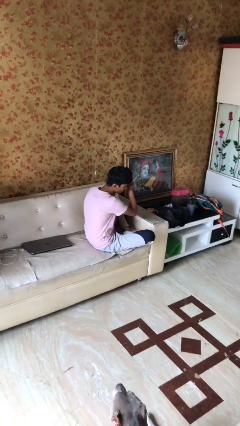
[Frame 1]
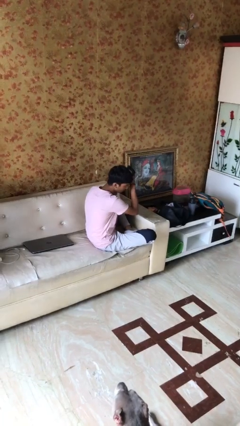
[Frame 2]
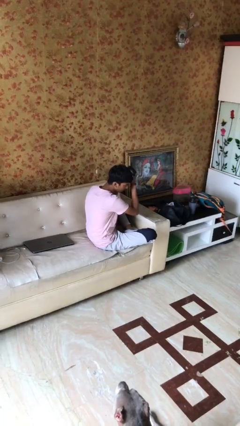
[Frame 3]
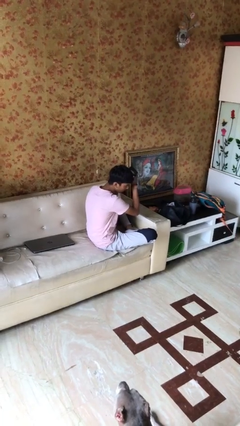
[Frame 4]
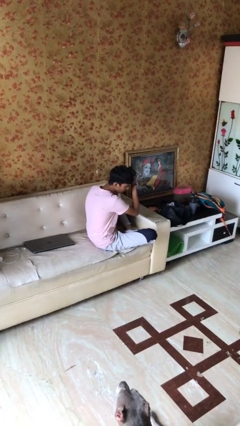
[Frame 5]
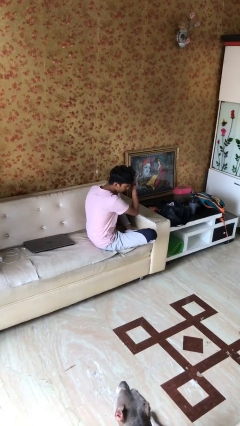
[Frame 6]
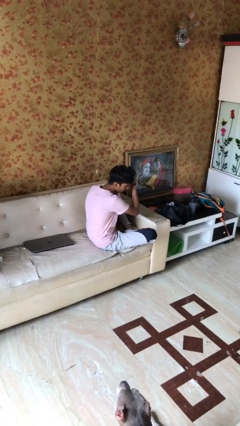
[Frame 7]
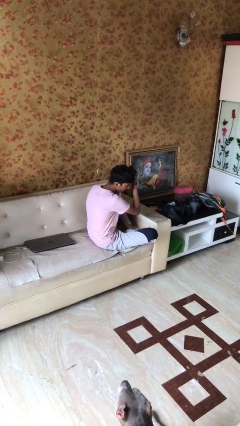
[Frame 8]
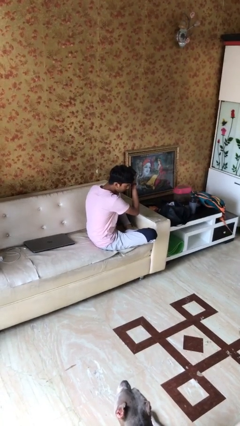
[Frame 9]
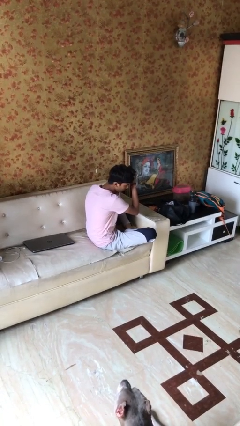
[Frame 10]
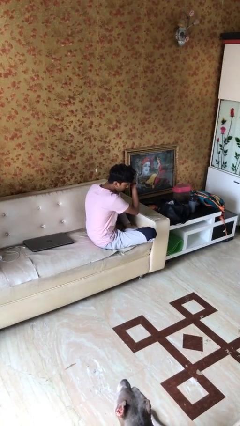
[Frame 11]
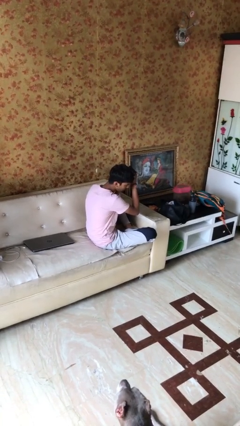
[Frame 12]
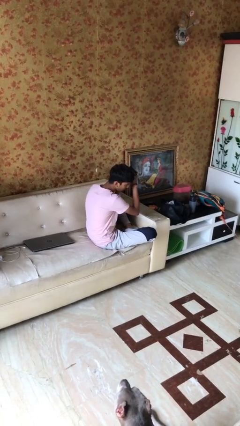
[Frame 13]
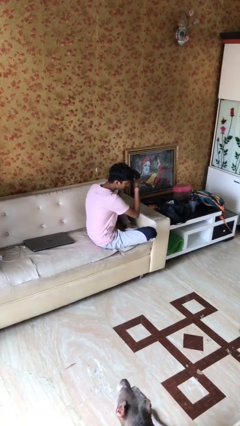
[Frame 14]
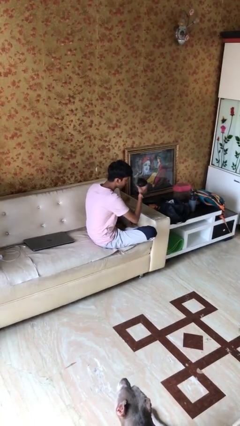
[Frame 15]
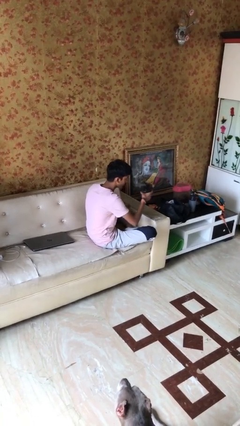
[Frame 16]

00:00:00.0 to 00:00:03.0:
person taps object with finger

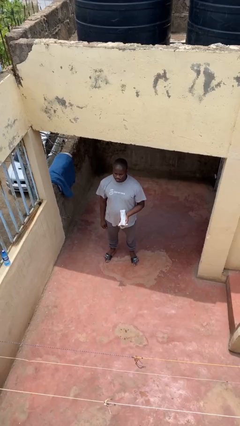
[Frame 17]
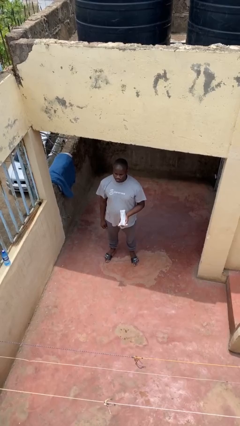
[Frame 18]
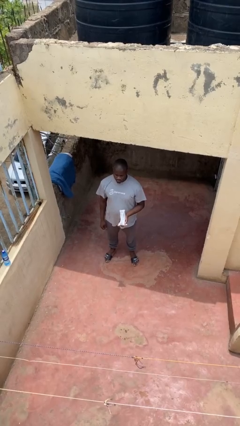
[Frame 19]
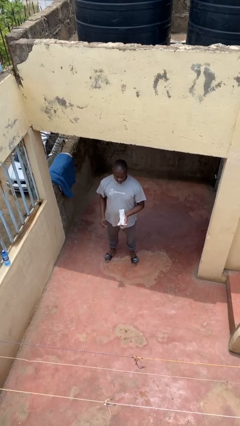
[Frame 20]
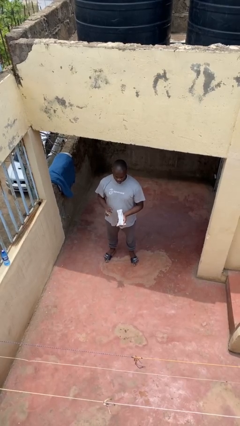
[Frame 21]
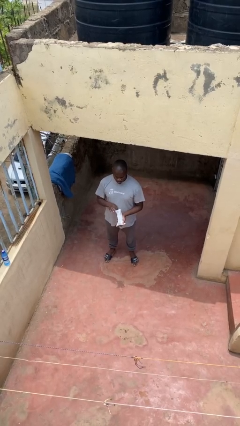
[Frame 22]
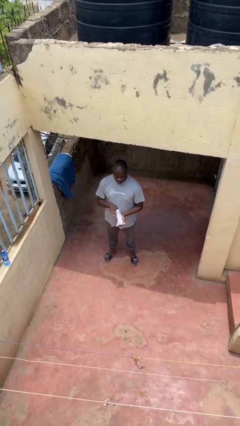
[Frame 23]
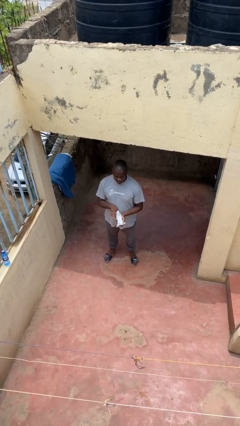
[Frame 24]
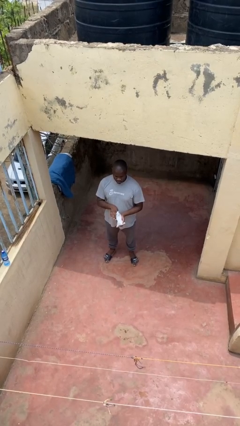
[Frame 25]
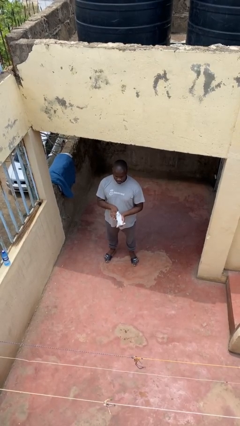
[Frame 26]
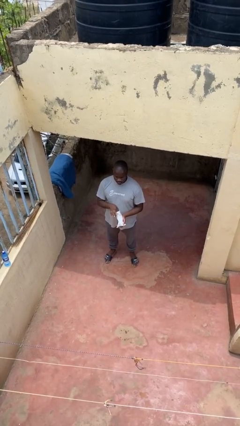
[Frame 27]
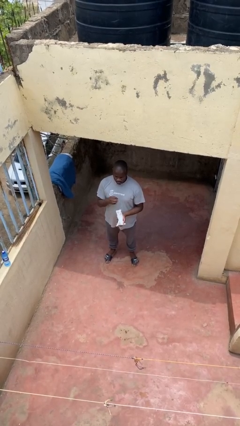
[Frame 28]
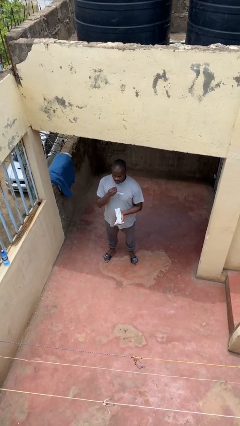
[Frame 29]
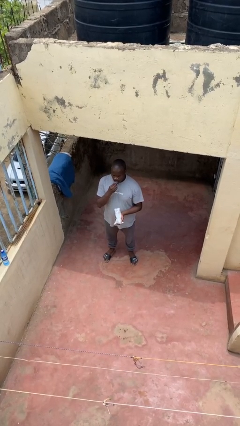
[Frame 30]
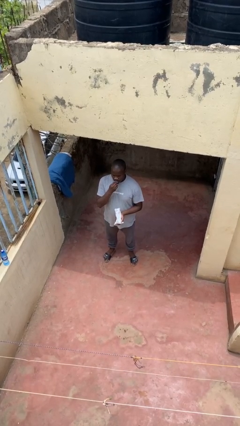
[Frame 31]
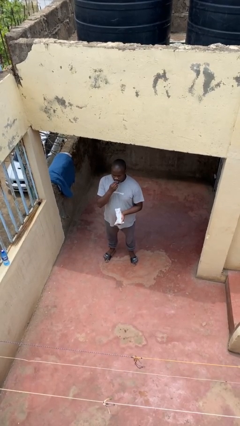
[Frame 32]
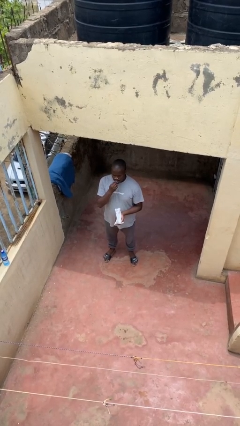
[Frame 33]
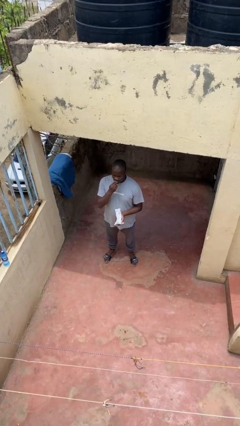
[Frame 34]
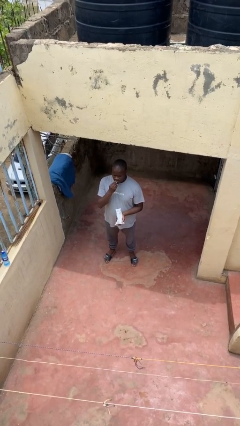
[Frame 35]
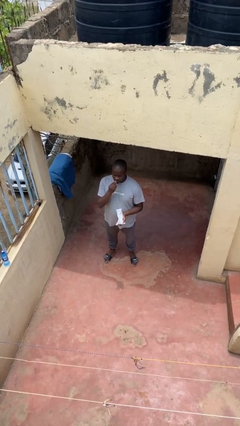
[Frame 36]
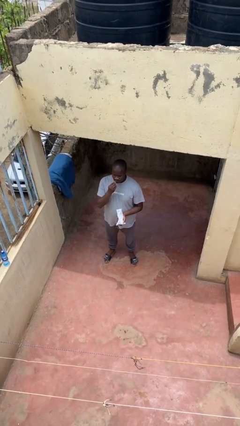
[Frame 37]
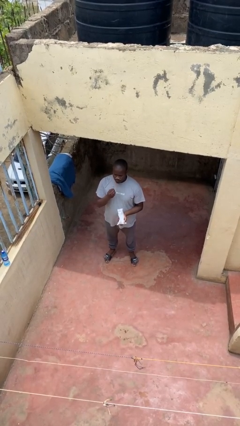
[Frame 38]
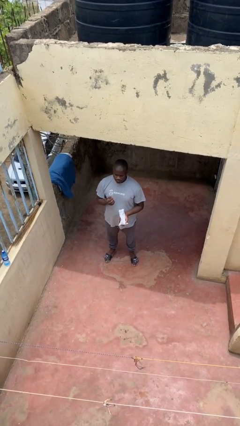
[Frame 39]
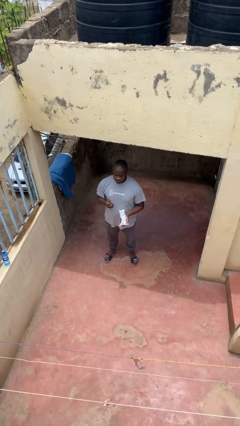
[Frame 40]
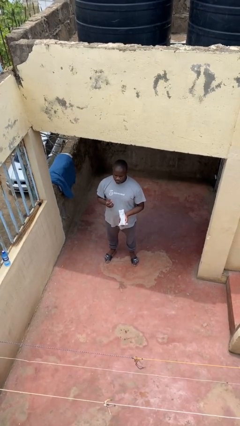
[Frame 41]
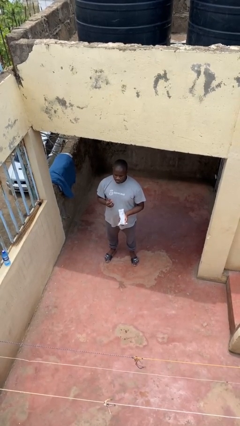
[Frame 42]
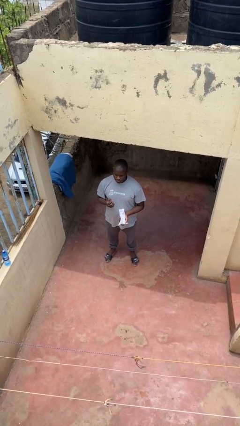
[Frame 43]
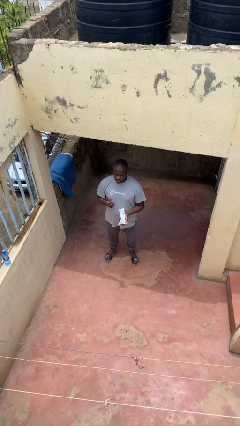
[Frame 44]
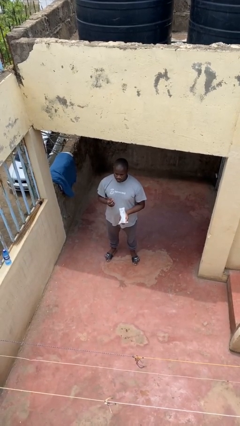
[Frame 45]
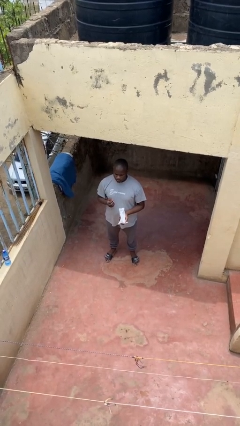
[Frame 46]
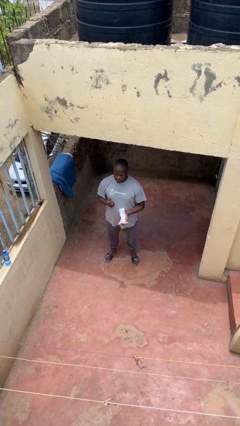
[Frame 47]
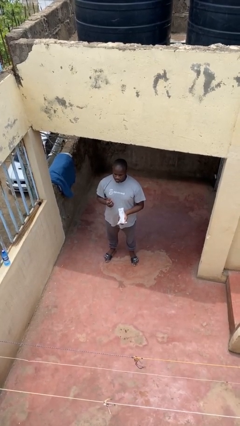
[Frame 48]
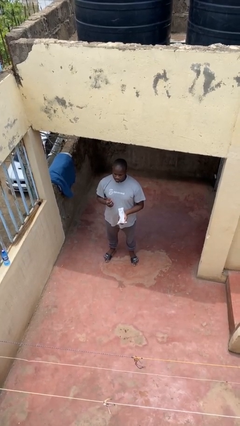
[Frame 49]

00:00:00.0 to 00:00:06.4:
person eats snack from bag

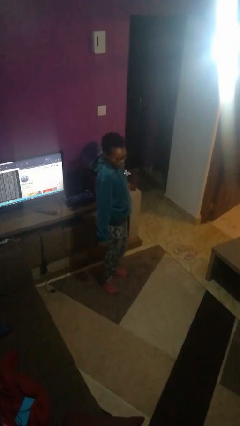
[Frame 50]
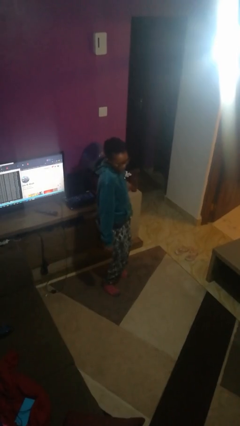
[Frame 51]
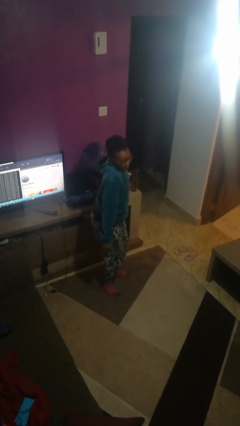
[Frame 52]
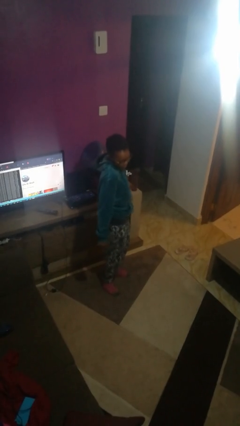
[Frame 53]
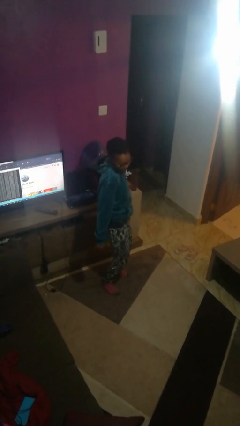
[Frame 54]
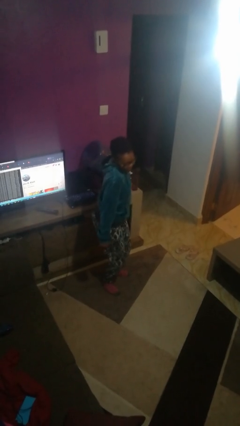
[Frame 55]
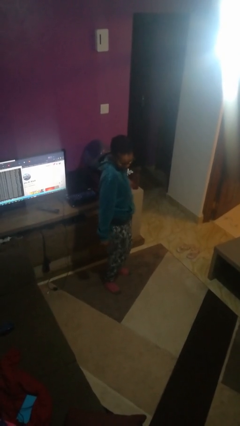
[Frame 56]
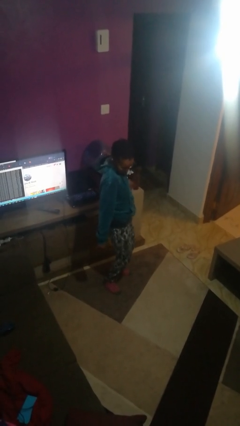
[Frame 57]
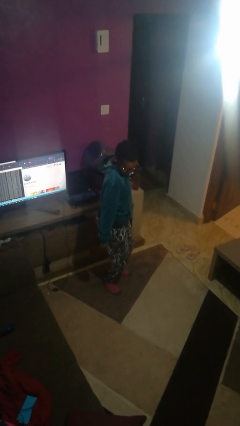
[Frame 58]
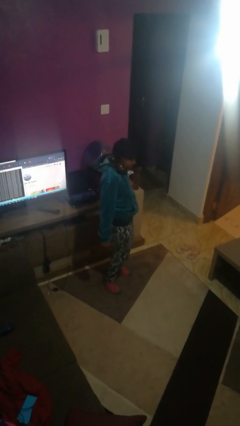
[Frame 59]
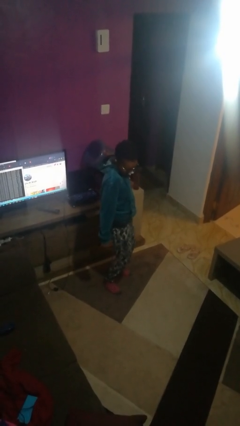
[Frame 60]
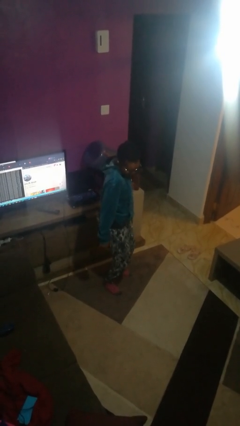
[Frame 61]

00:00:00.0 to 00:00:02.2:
person wiggles hips

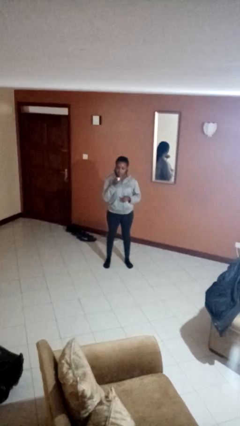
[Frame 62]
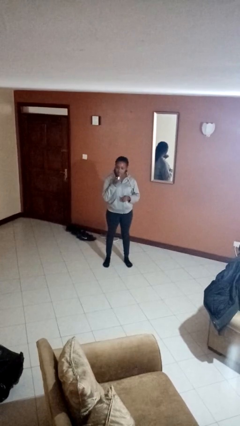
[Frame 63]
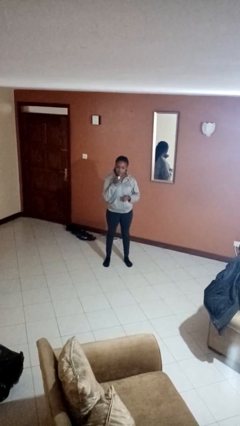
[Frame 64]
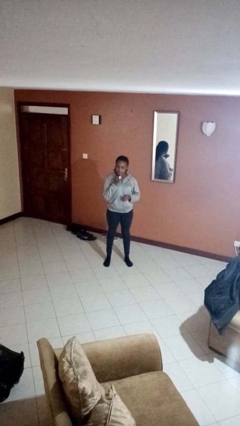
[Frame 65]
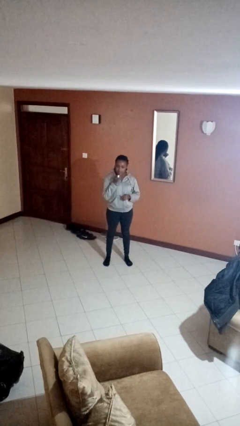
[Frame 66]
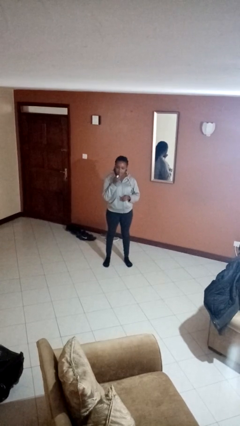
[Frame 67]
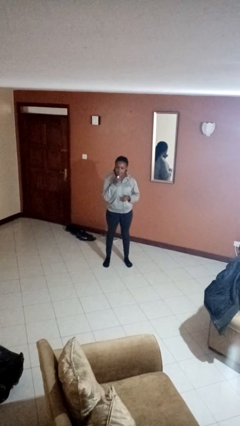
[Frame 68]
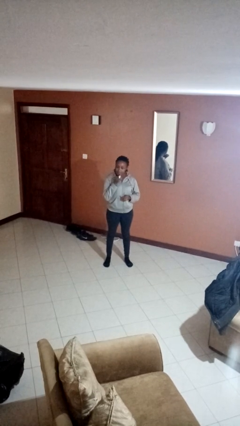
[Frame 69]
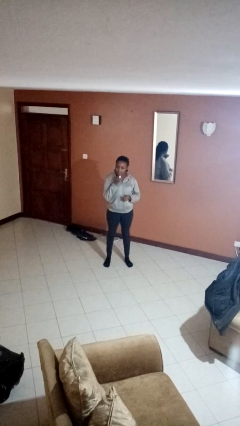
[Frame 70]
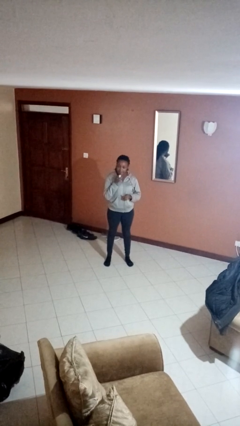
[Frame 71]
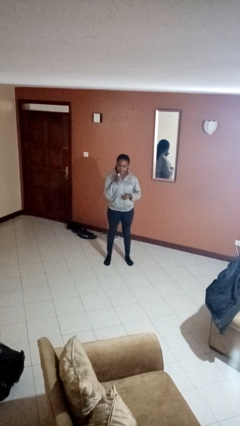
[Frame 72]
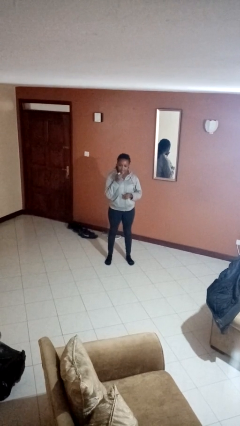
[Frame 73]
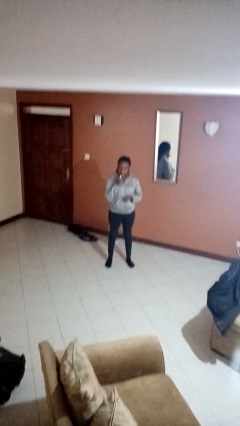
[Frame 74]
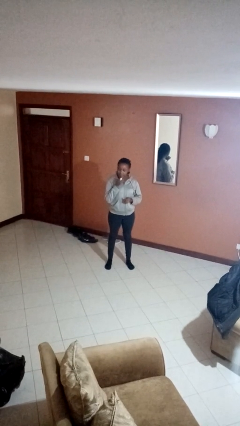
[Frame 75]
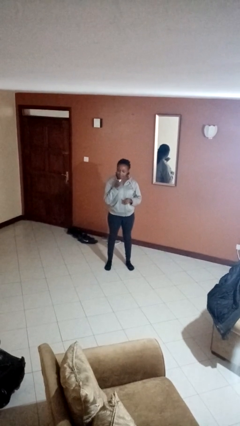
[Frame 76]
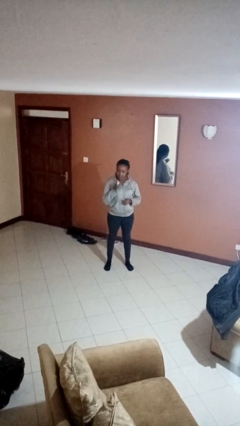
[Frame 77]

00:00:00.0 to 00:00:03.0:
person applies lip makeup

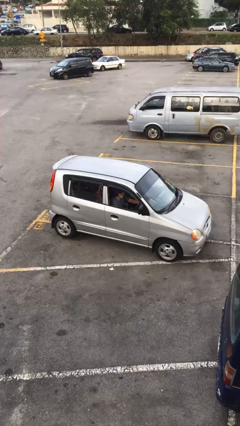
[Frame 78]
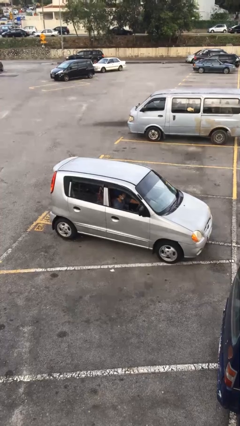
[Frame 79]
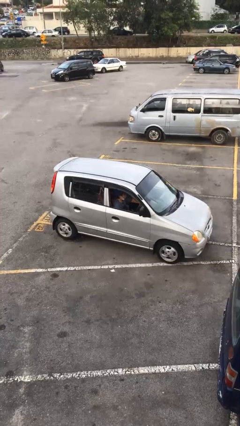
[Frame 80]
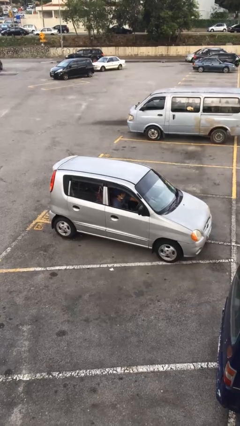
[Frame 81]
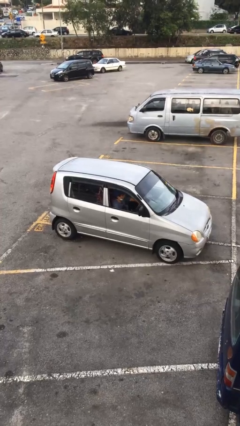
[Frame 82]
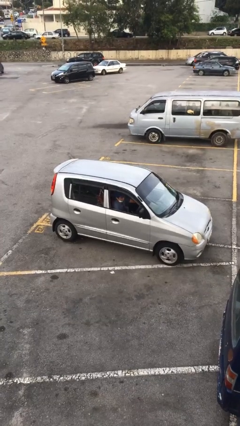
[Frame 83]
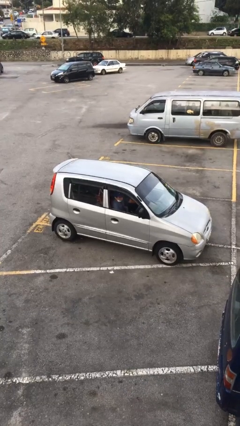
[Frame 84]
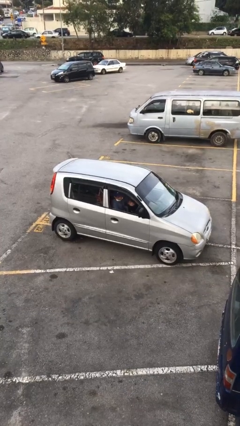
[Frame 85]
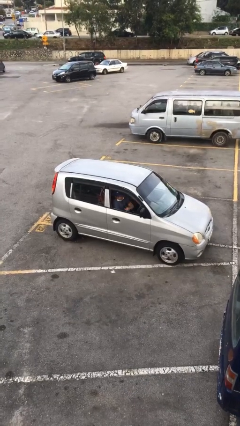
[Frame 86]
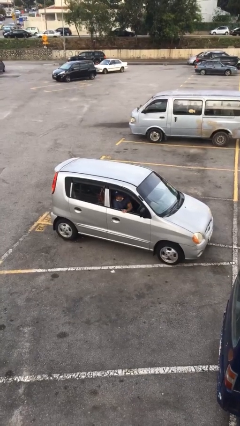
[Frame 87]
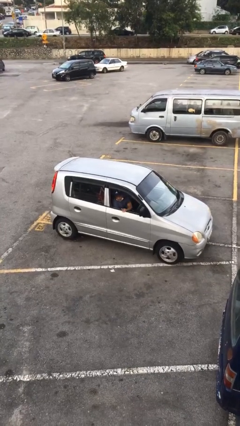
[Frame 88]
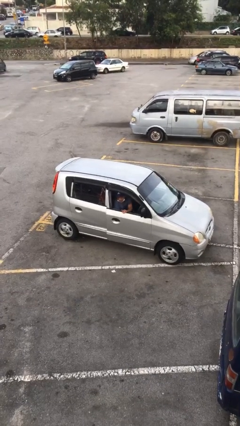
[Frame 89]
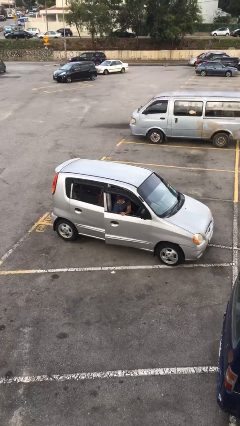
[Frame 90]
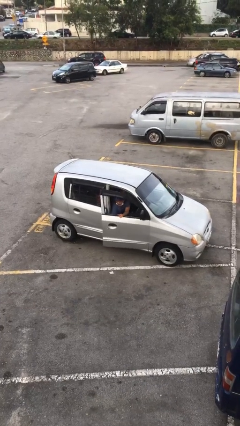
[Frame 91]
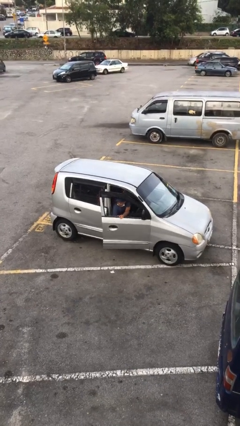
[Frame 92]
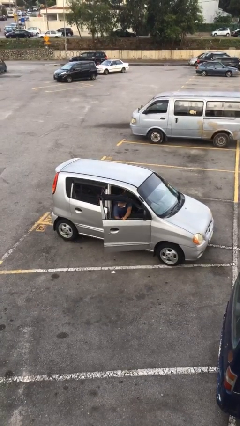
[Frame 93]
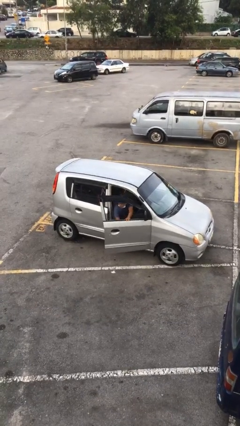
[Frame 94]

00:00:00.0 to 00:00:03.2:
person opens car door
